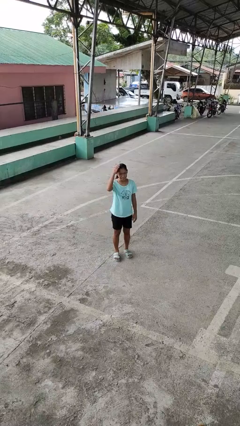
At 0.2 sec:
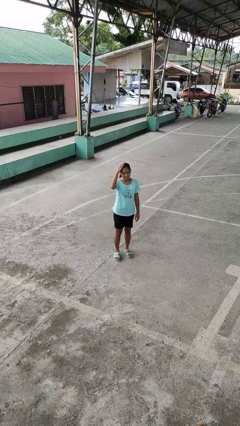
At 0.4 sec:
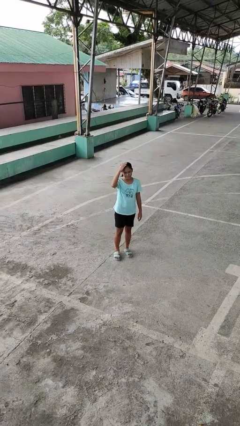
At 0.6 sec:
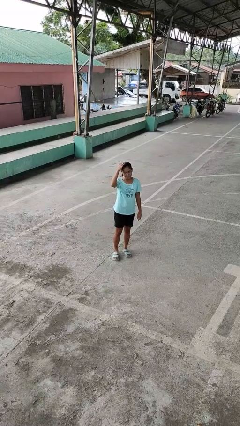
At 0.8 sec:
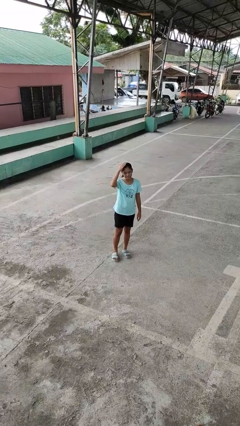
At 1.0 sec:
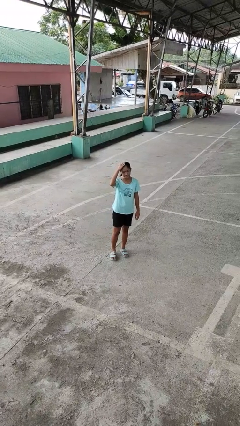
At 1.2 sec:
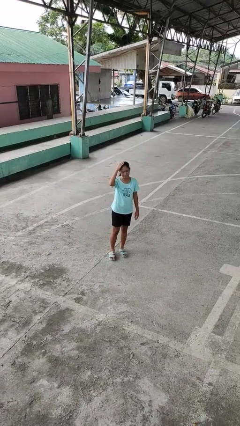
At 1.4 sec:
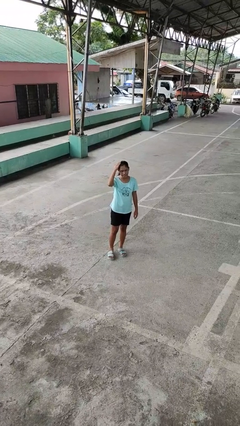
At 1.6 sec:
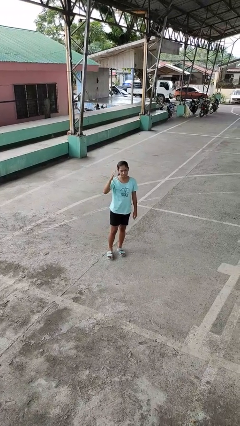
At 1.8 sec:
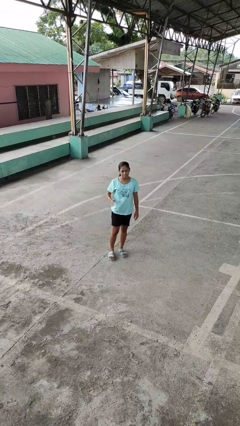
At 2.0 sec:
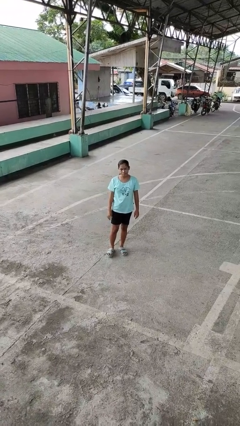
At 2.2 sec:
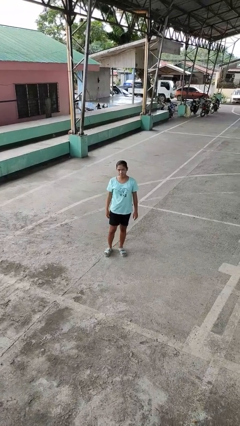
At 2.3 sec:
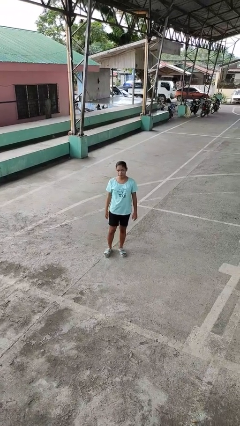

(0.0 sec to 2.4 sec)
person pats head

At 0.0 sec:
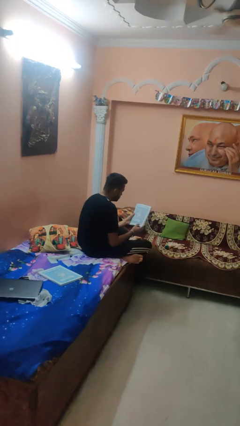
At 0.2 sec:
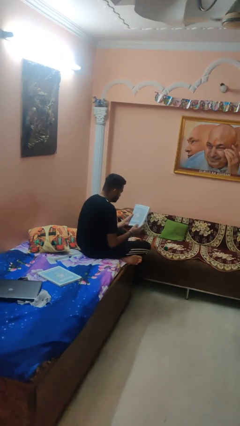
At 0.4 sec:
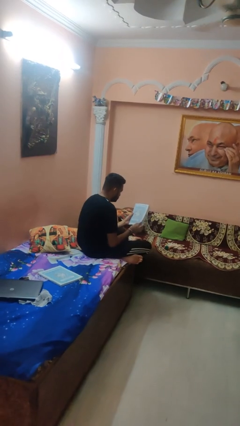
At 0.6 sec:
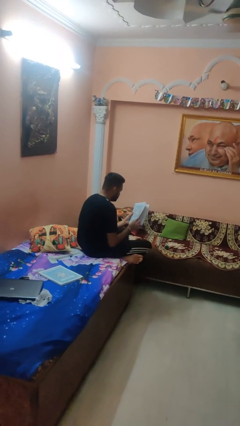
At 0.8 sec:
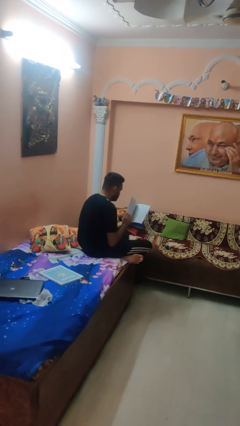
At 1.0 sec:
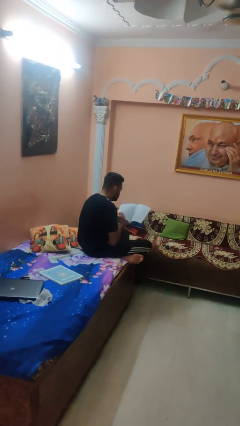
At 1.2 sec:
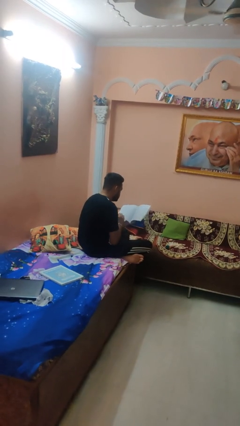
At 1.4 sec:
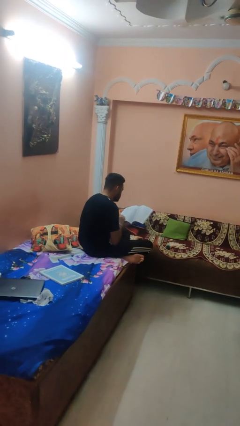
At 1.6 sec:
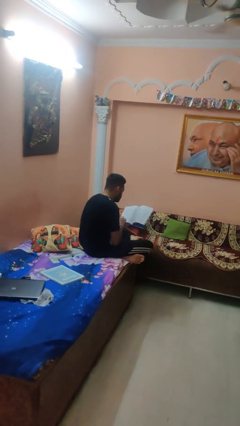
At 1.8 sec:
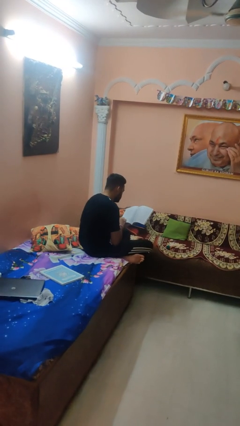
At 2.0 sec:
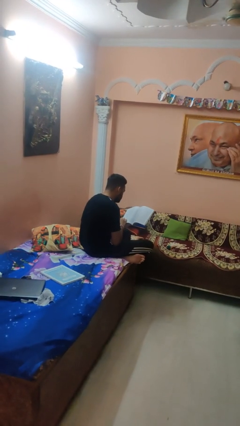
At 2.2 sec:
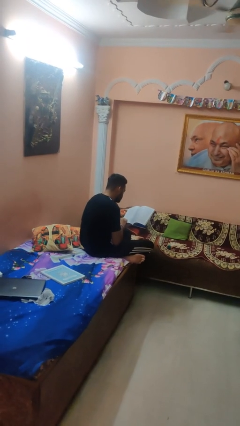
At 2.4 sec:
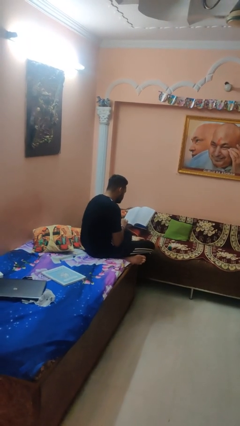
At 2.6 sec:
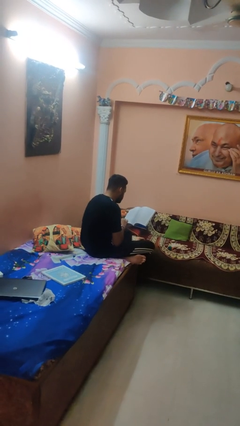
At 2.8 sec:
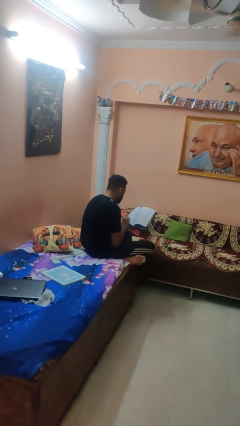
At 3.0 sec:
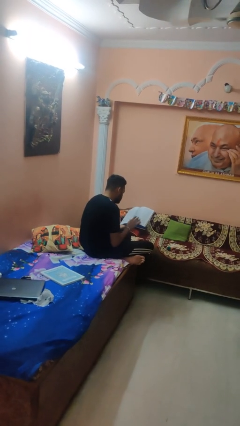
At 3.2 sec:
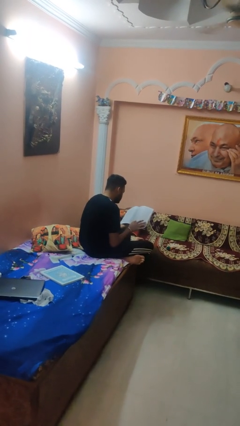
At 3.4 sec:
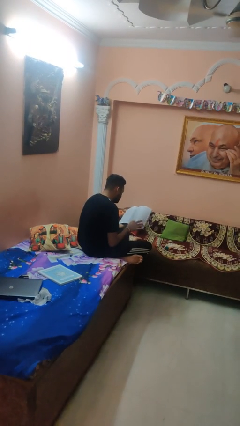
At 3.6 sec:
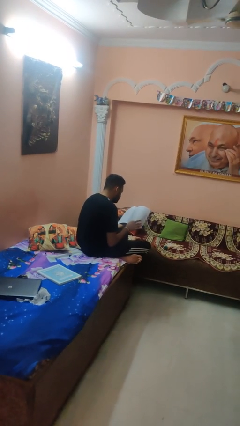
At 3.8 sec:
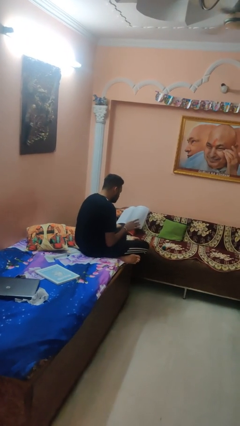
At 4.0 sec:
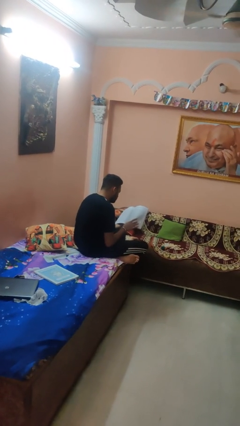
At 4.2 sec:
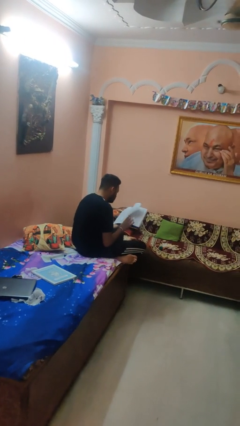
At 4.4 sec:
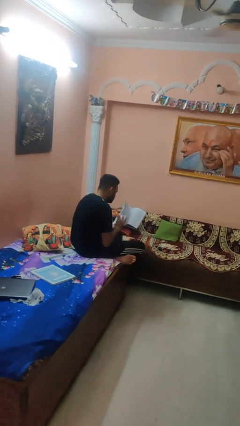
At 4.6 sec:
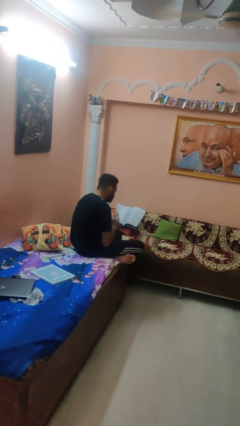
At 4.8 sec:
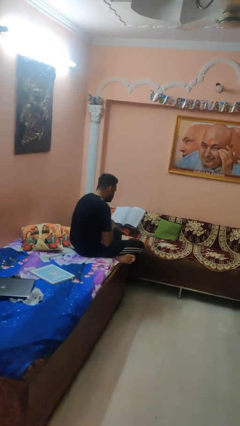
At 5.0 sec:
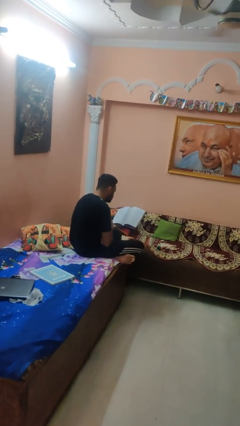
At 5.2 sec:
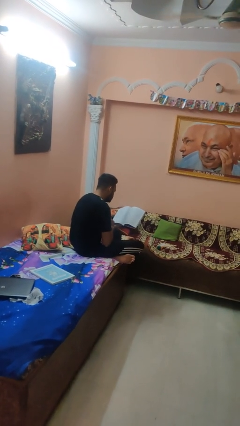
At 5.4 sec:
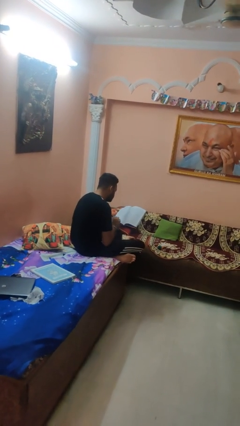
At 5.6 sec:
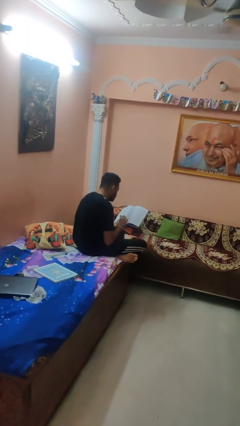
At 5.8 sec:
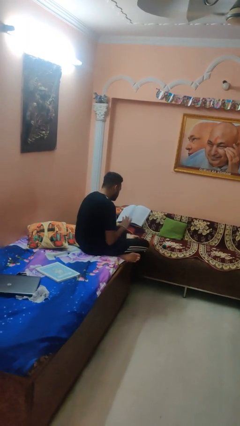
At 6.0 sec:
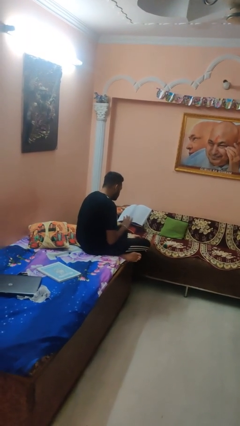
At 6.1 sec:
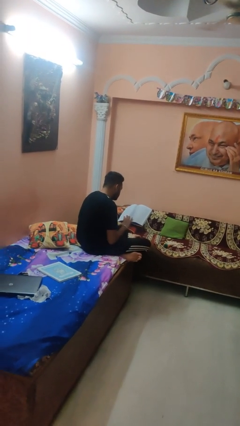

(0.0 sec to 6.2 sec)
person reads magazine

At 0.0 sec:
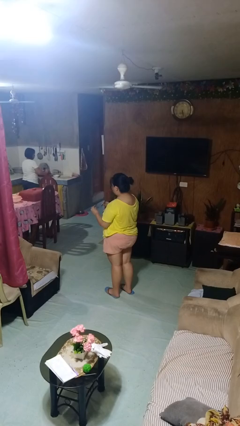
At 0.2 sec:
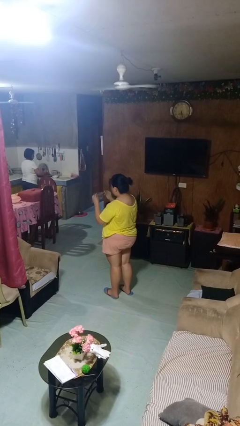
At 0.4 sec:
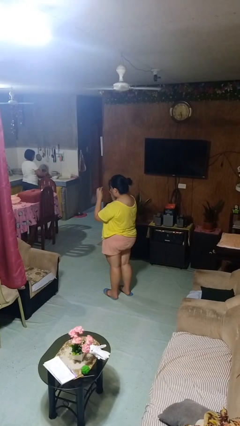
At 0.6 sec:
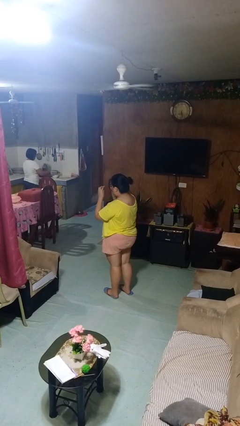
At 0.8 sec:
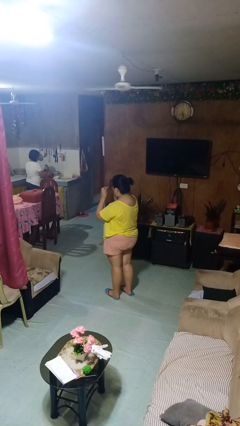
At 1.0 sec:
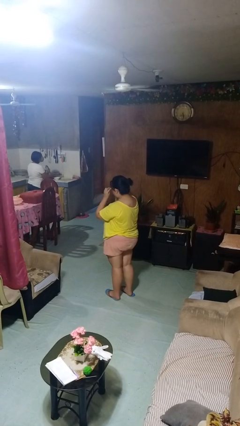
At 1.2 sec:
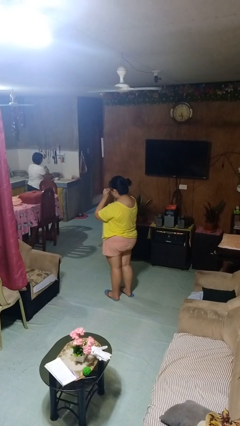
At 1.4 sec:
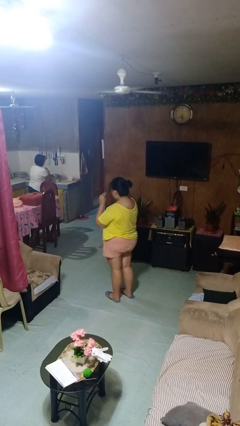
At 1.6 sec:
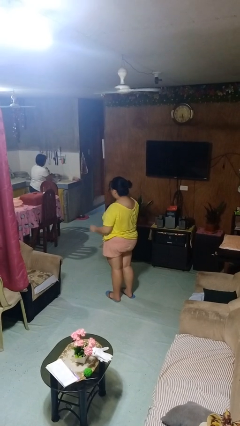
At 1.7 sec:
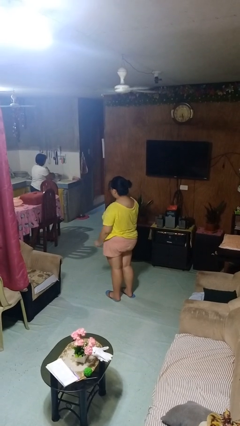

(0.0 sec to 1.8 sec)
person puts on glasses

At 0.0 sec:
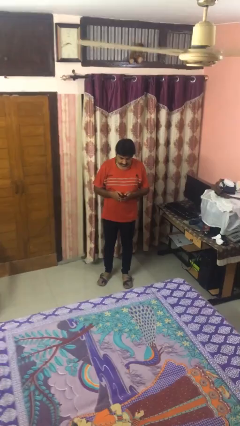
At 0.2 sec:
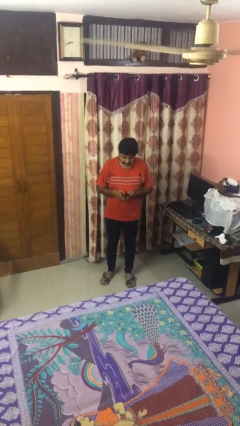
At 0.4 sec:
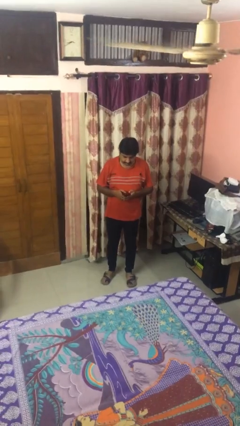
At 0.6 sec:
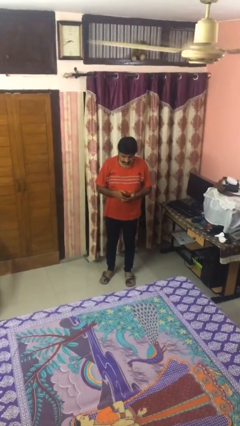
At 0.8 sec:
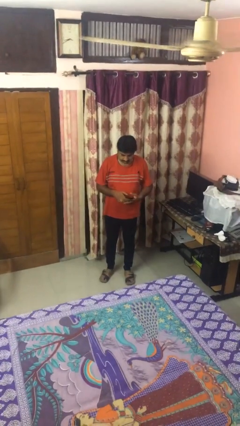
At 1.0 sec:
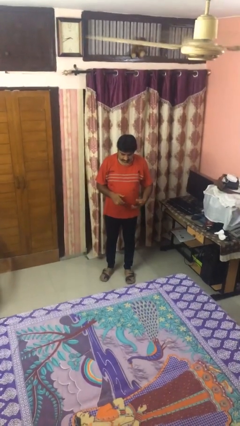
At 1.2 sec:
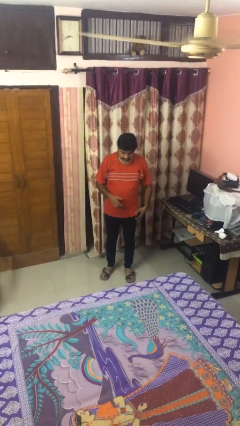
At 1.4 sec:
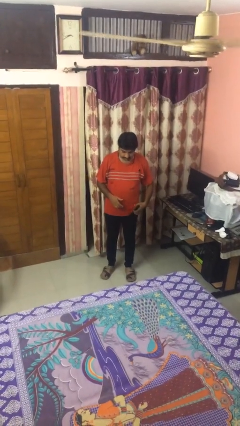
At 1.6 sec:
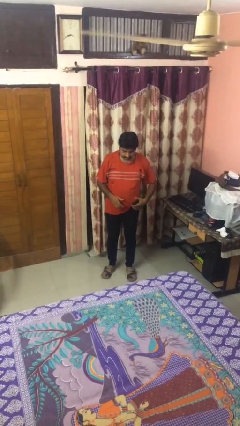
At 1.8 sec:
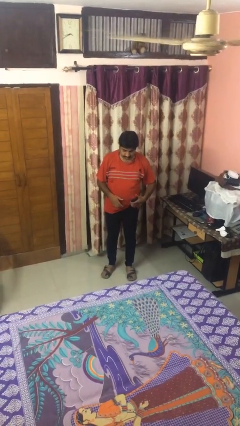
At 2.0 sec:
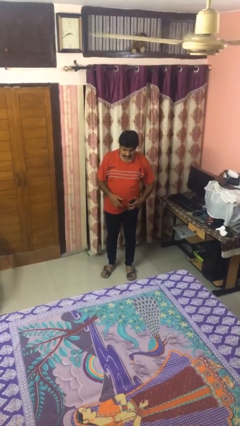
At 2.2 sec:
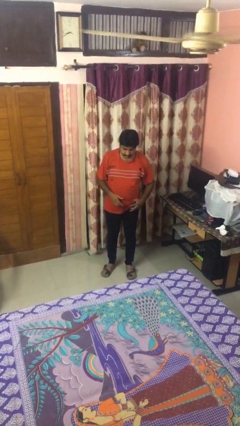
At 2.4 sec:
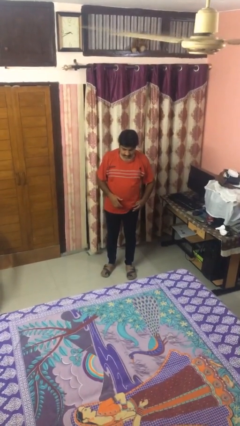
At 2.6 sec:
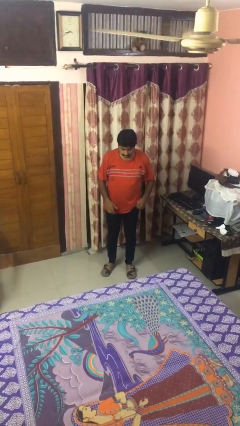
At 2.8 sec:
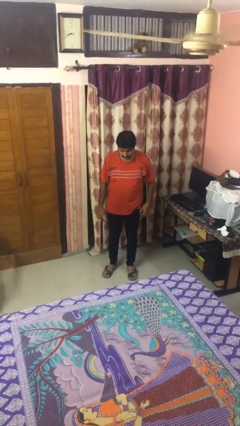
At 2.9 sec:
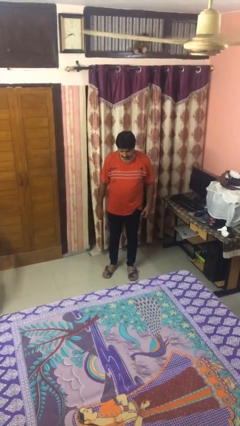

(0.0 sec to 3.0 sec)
person puts phone into pocket

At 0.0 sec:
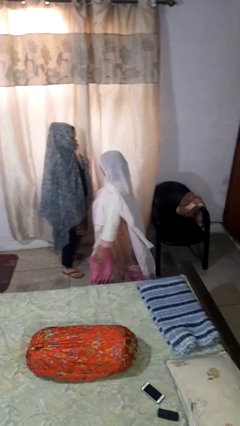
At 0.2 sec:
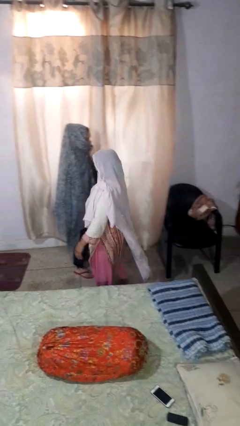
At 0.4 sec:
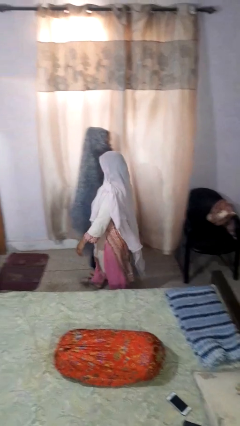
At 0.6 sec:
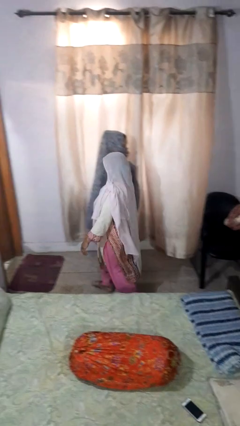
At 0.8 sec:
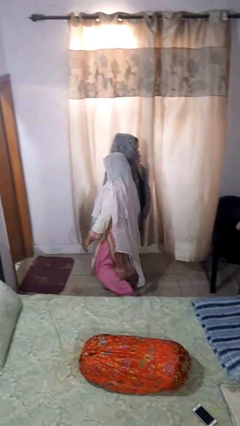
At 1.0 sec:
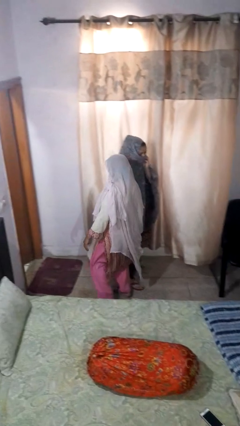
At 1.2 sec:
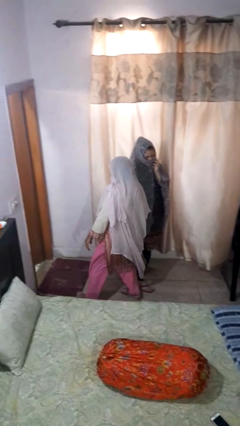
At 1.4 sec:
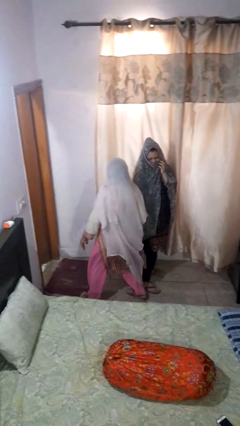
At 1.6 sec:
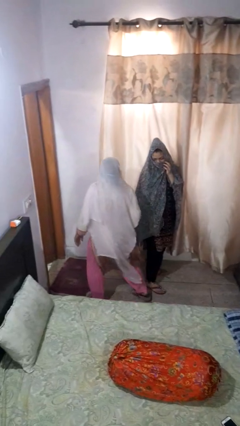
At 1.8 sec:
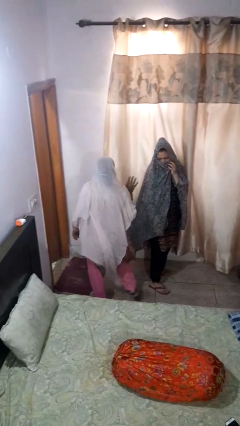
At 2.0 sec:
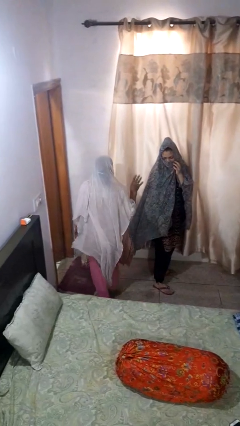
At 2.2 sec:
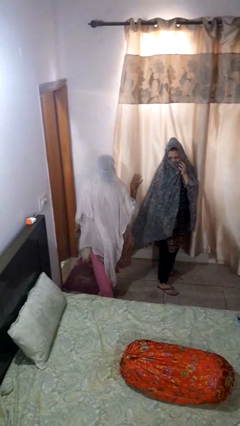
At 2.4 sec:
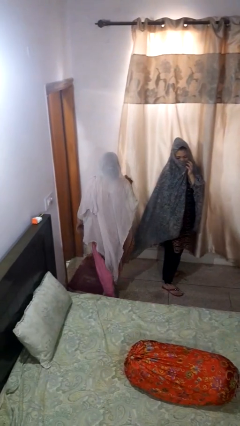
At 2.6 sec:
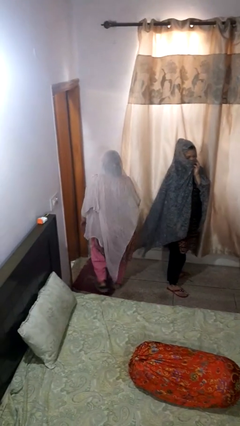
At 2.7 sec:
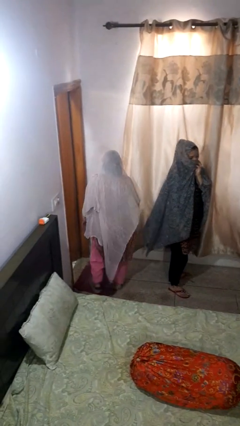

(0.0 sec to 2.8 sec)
person bumps into person

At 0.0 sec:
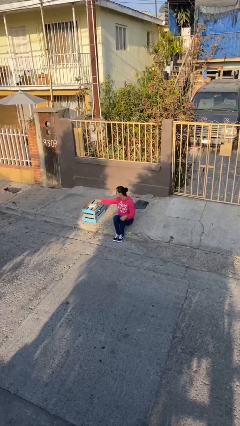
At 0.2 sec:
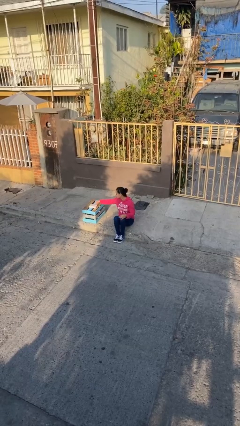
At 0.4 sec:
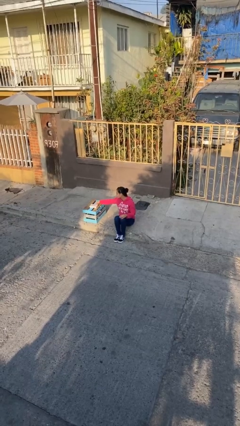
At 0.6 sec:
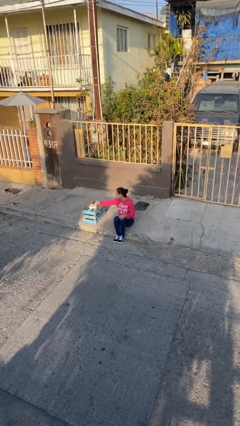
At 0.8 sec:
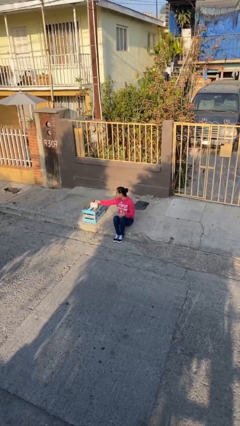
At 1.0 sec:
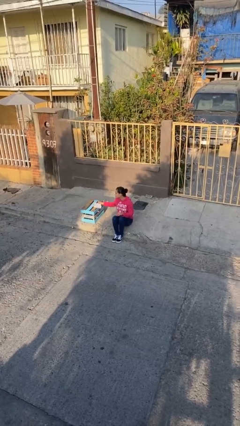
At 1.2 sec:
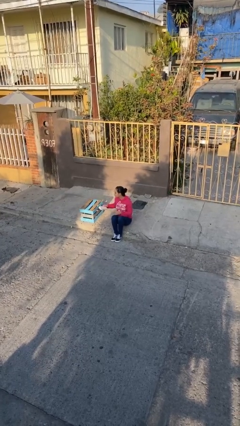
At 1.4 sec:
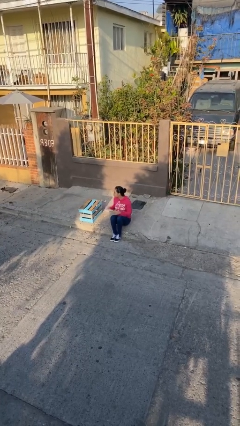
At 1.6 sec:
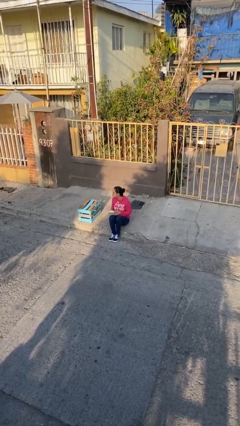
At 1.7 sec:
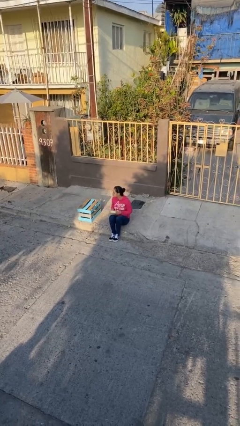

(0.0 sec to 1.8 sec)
person picks up object from table
